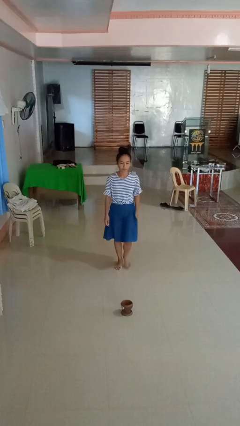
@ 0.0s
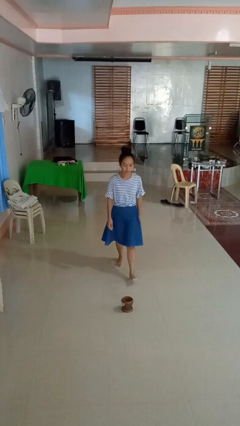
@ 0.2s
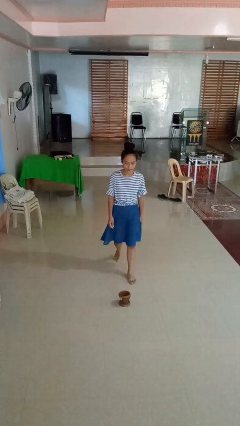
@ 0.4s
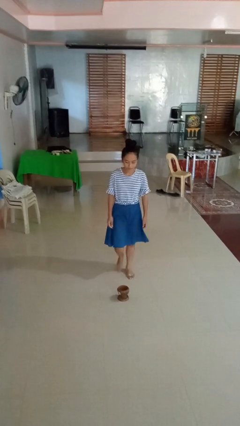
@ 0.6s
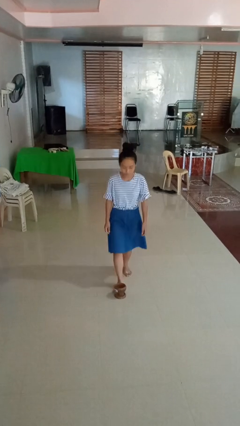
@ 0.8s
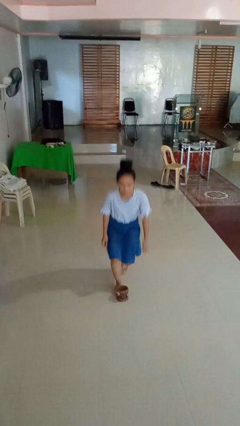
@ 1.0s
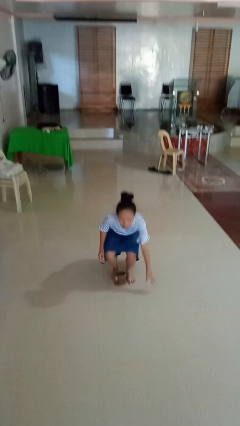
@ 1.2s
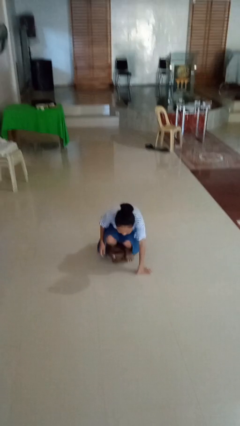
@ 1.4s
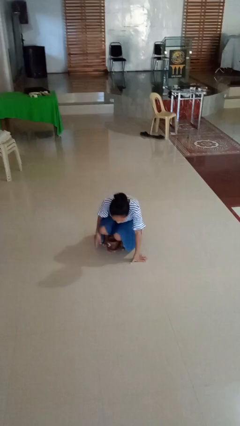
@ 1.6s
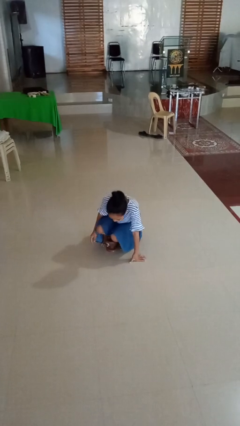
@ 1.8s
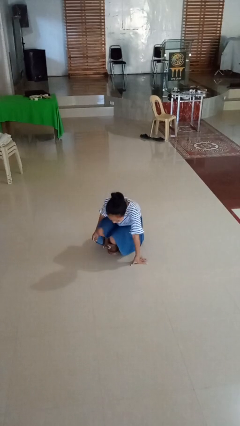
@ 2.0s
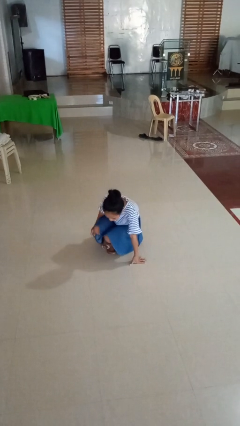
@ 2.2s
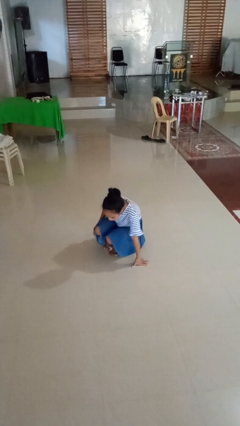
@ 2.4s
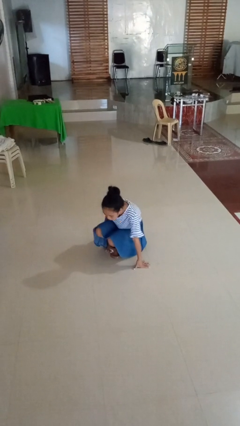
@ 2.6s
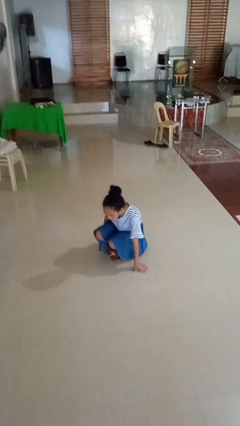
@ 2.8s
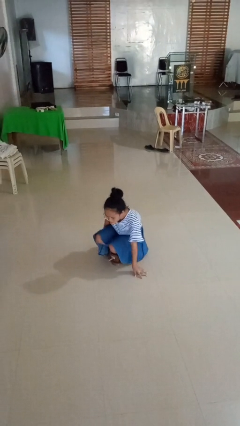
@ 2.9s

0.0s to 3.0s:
person trips on object on floor

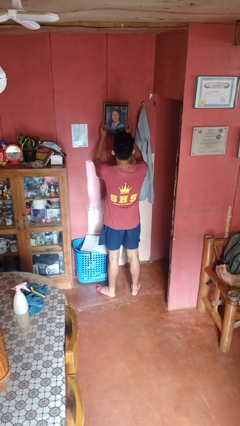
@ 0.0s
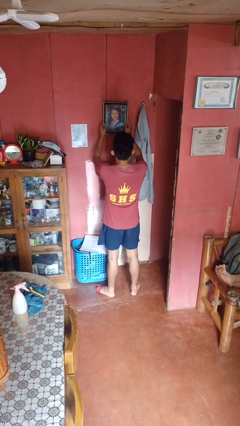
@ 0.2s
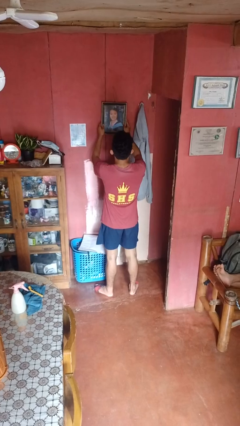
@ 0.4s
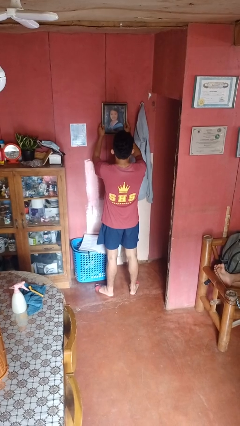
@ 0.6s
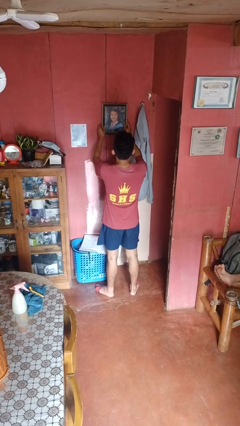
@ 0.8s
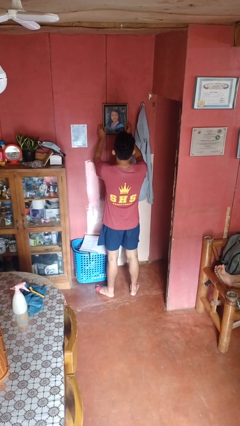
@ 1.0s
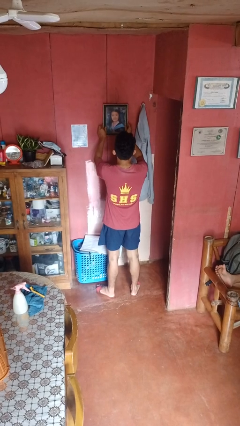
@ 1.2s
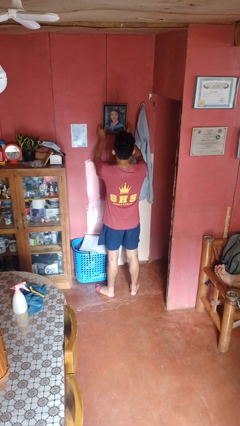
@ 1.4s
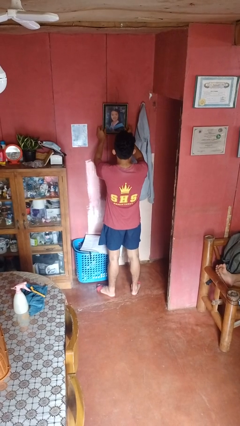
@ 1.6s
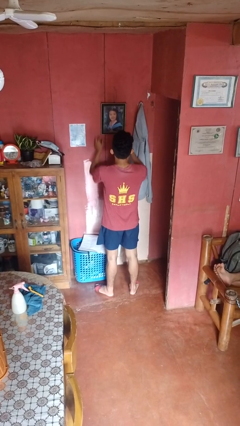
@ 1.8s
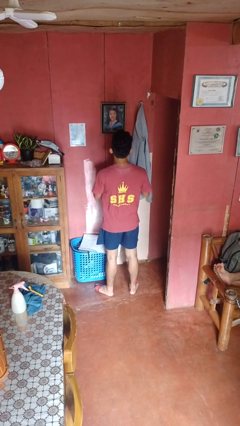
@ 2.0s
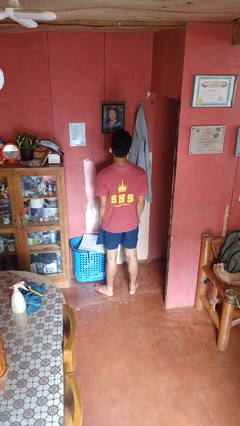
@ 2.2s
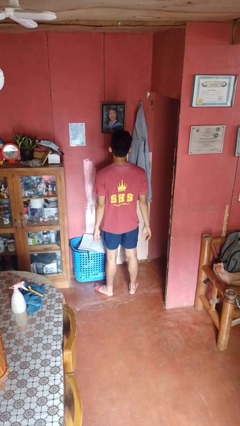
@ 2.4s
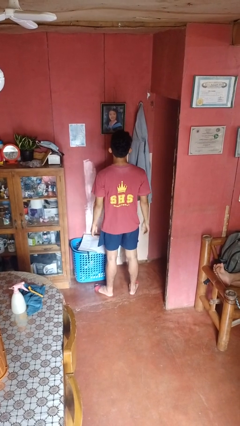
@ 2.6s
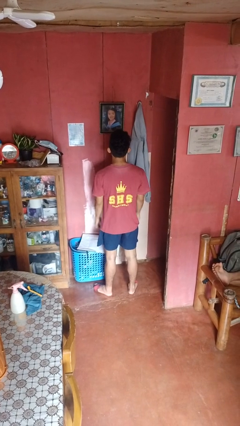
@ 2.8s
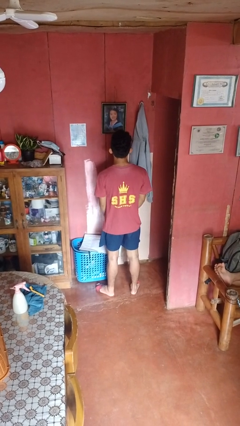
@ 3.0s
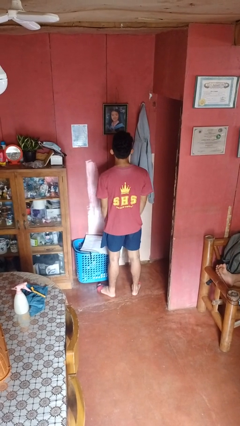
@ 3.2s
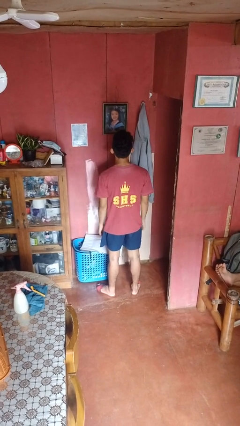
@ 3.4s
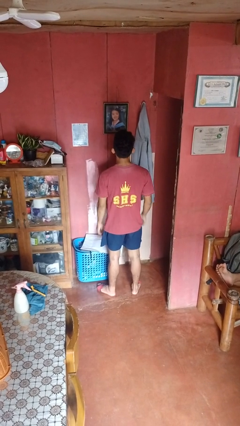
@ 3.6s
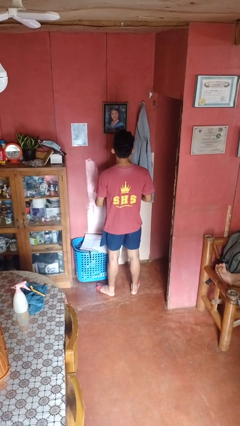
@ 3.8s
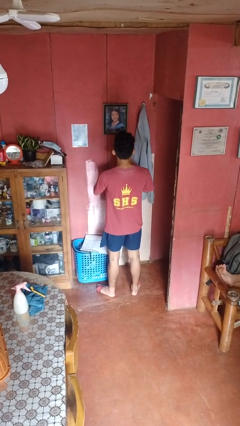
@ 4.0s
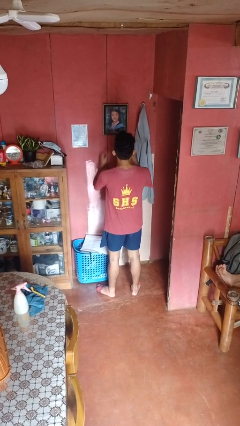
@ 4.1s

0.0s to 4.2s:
person puts up picture frame

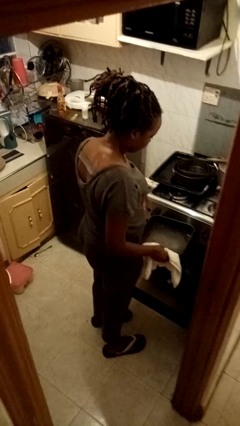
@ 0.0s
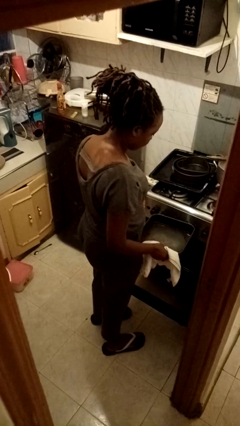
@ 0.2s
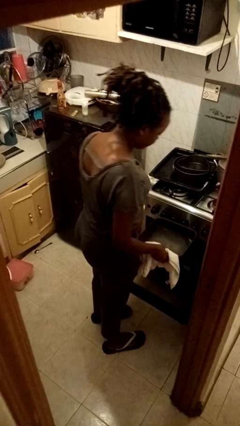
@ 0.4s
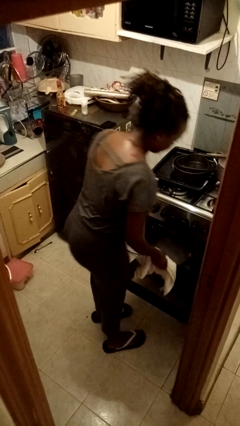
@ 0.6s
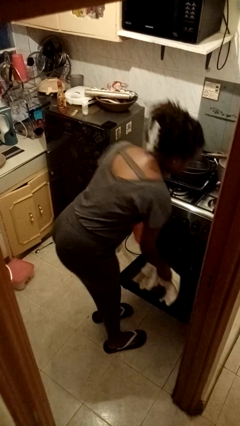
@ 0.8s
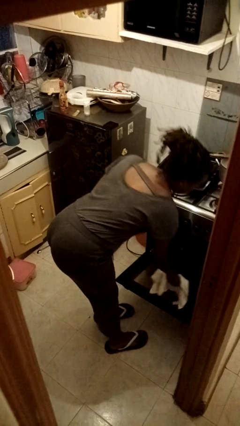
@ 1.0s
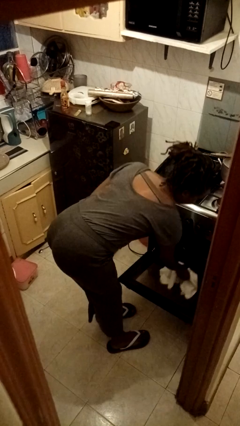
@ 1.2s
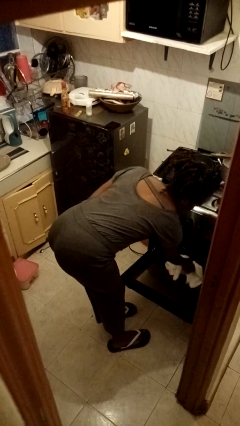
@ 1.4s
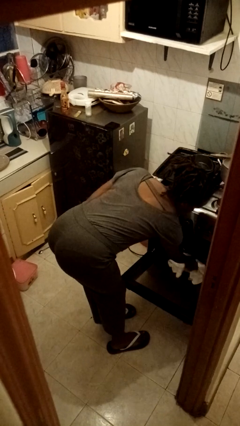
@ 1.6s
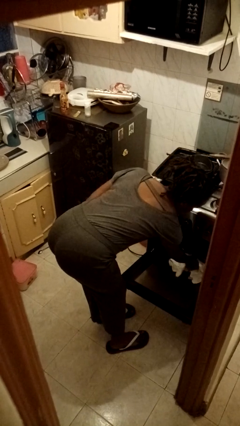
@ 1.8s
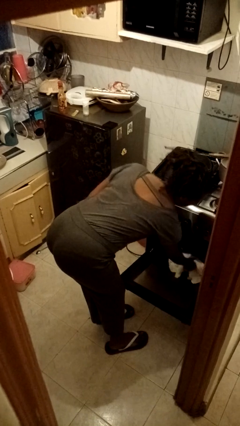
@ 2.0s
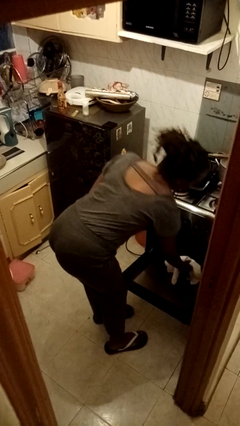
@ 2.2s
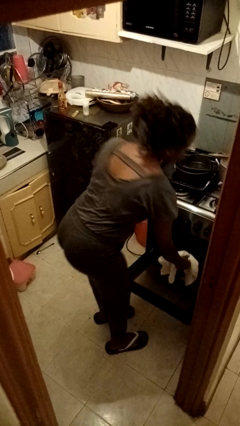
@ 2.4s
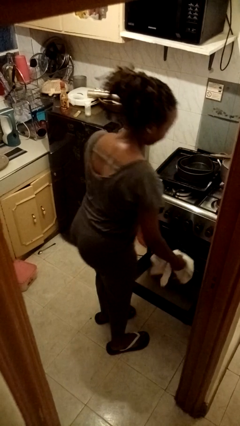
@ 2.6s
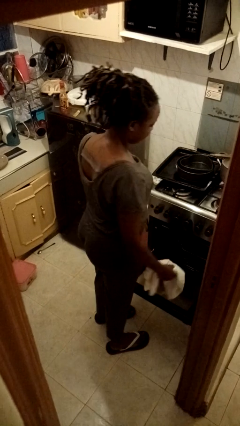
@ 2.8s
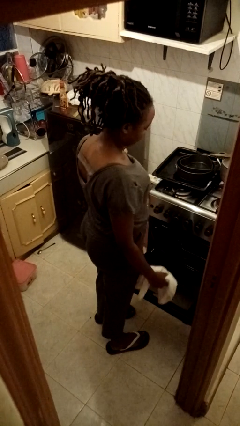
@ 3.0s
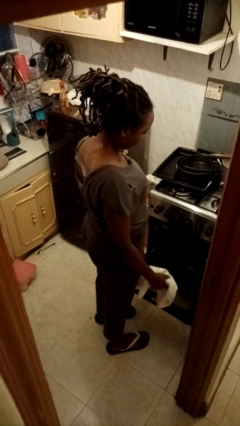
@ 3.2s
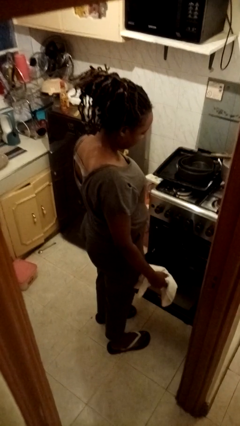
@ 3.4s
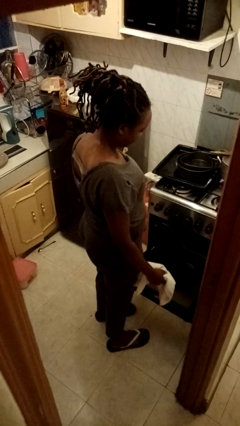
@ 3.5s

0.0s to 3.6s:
person puts object into oven

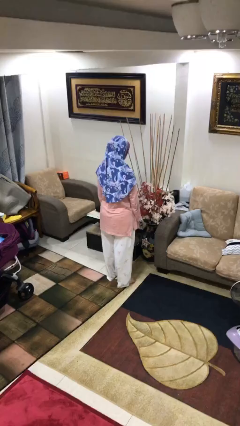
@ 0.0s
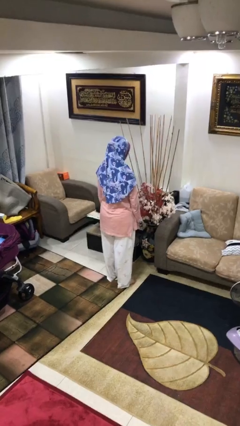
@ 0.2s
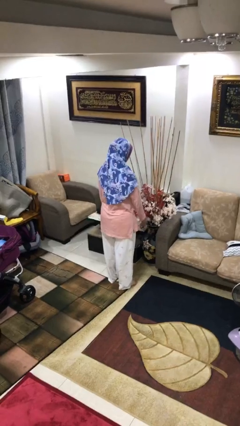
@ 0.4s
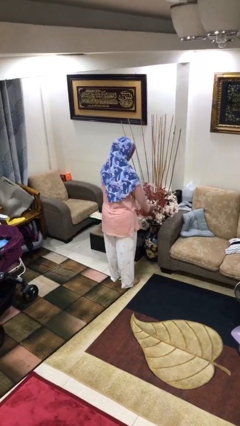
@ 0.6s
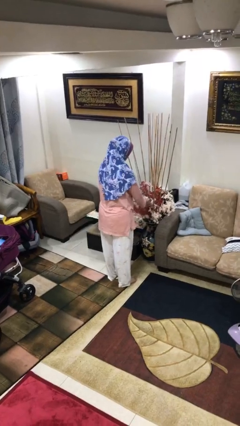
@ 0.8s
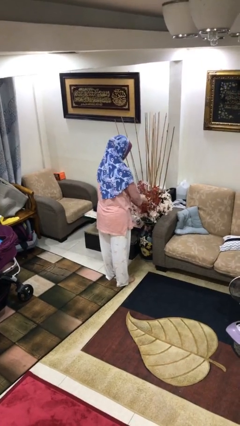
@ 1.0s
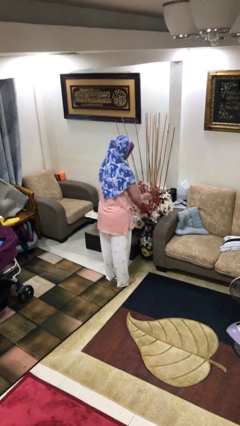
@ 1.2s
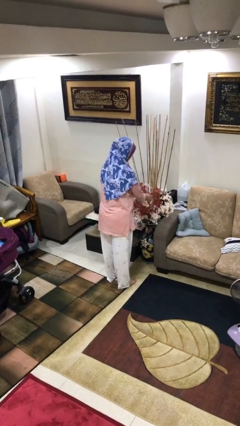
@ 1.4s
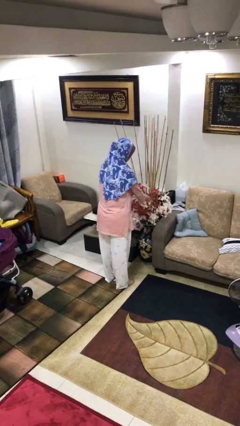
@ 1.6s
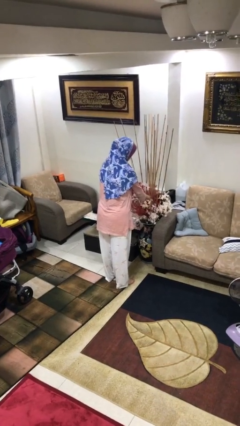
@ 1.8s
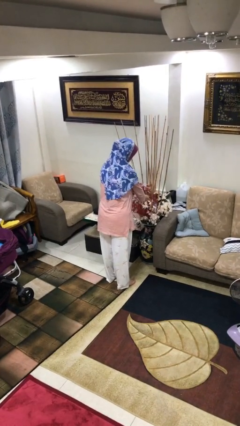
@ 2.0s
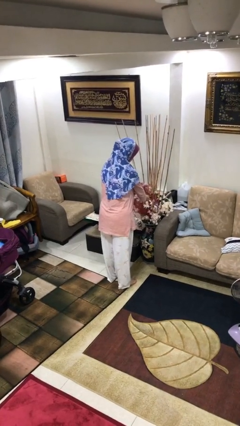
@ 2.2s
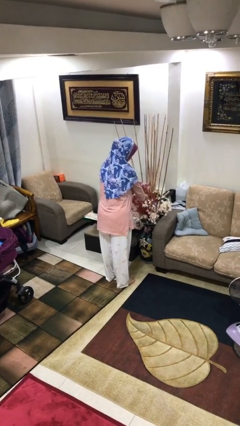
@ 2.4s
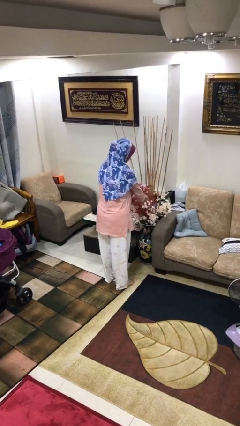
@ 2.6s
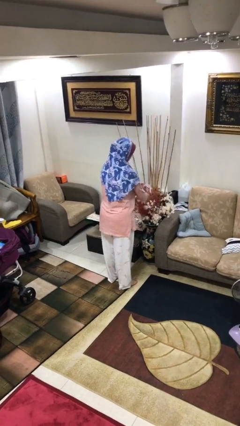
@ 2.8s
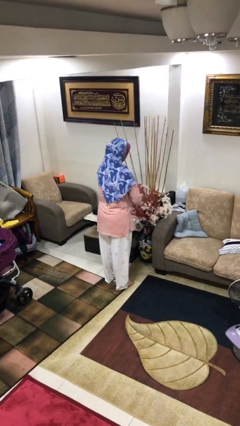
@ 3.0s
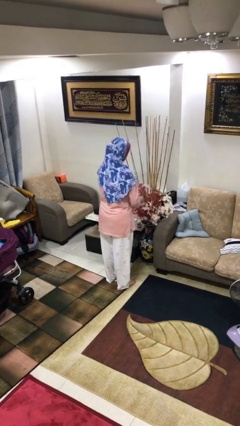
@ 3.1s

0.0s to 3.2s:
person arranges flowers in vase

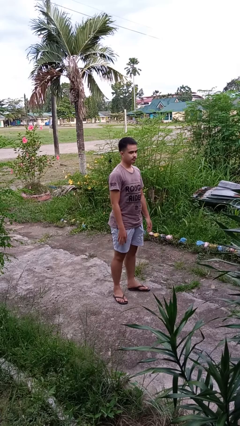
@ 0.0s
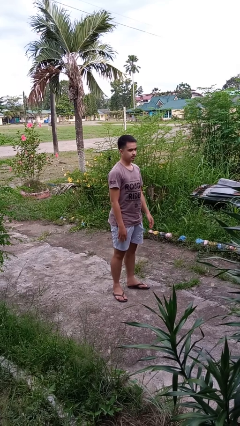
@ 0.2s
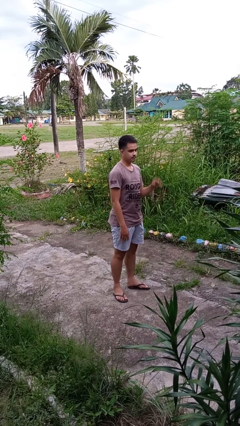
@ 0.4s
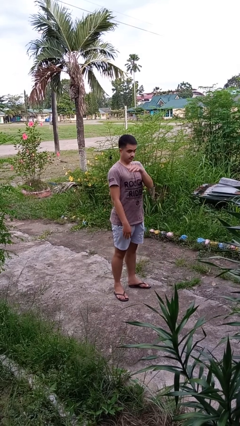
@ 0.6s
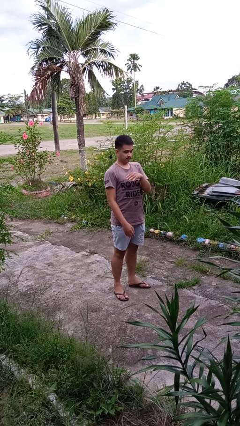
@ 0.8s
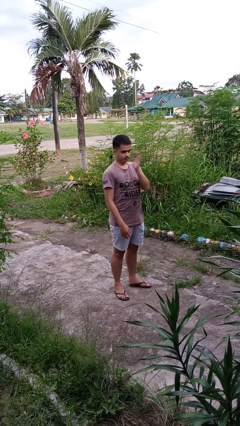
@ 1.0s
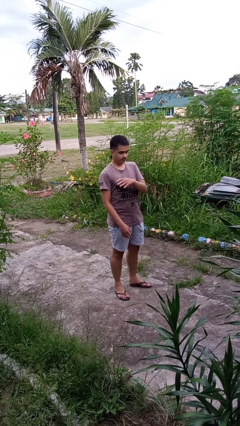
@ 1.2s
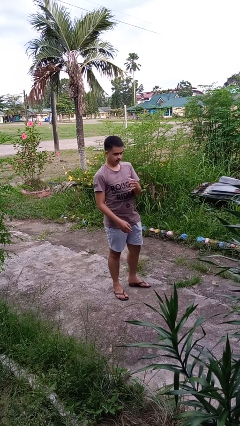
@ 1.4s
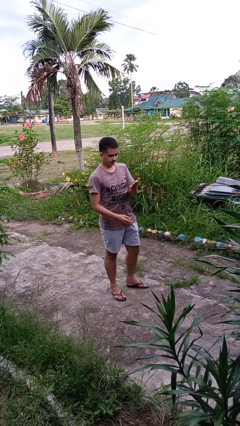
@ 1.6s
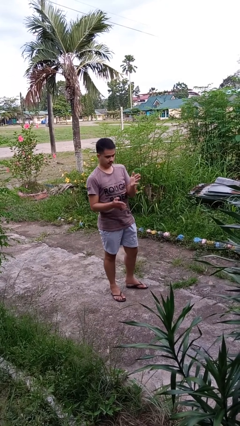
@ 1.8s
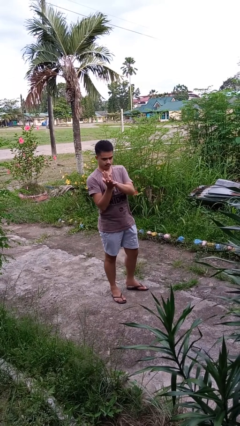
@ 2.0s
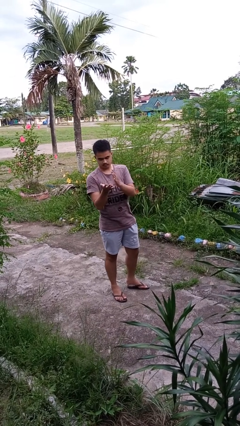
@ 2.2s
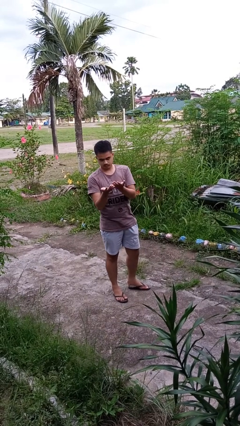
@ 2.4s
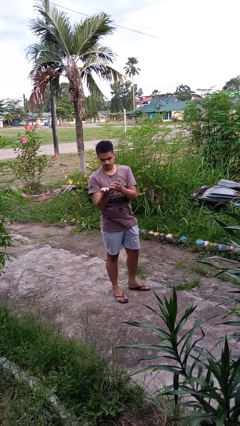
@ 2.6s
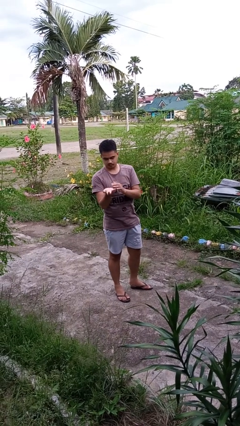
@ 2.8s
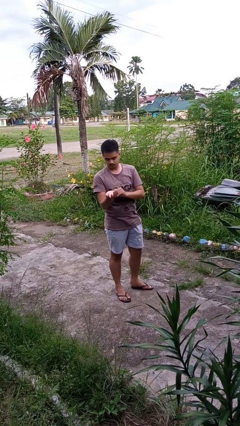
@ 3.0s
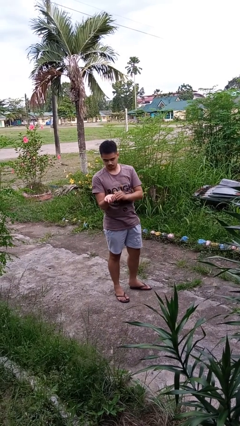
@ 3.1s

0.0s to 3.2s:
person swats bug

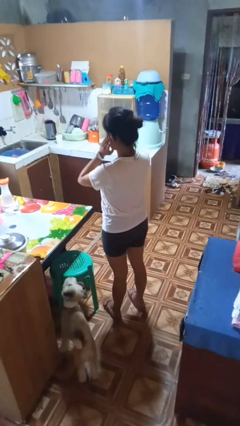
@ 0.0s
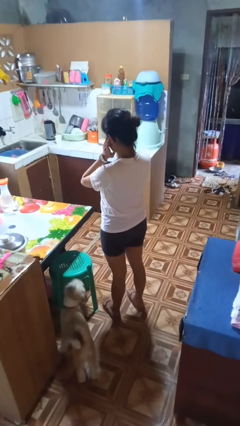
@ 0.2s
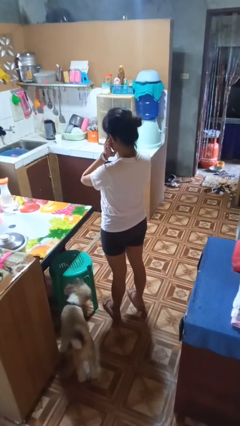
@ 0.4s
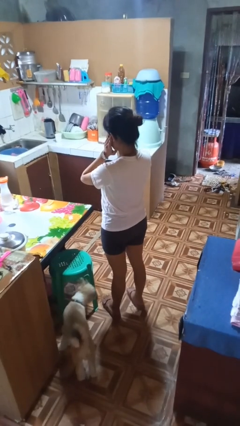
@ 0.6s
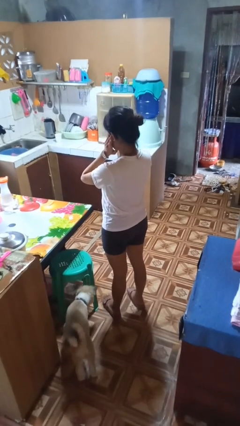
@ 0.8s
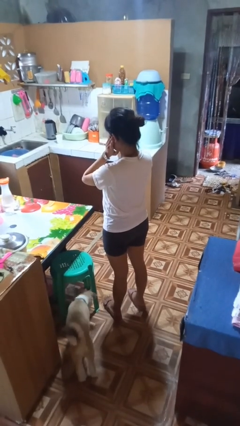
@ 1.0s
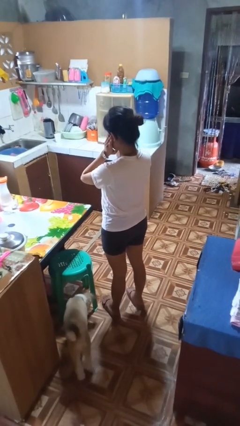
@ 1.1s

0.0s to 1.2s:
person puts fingers in ear
